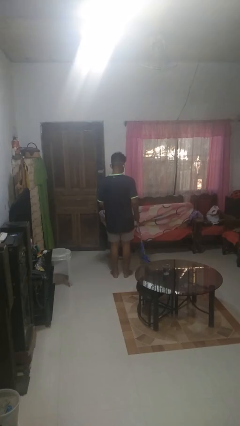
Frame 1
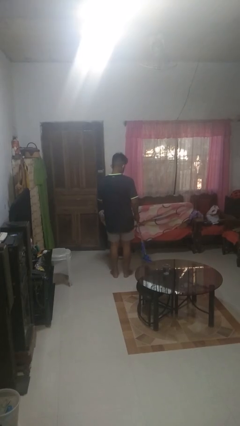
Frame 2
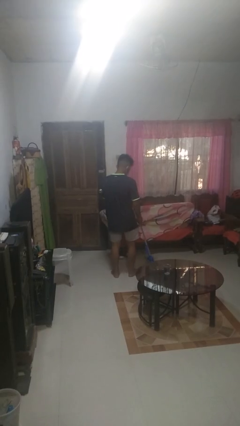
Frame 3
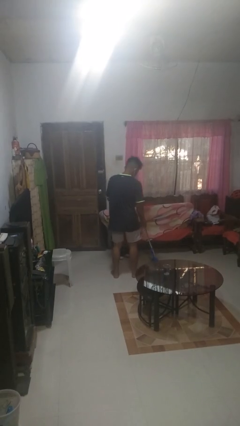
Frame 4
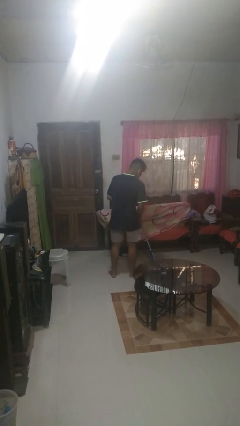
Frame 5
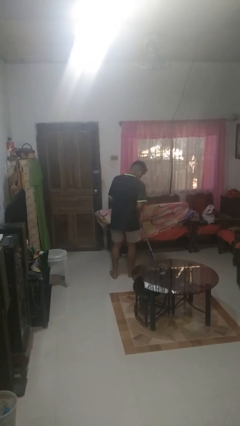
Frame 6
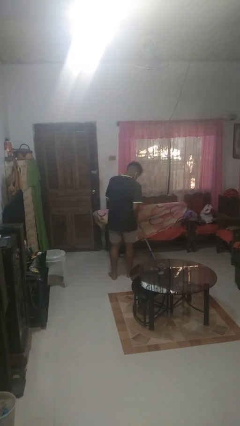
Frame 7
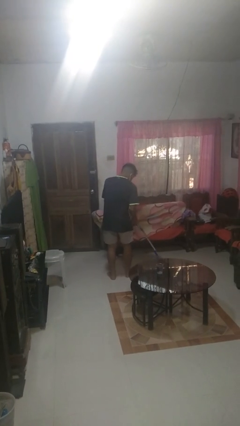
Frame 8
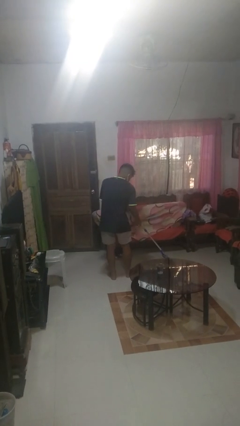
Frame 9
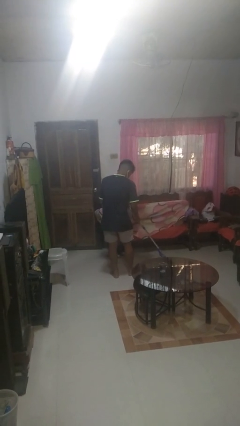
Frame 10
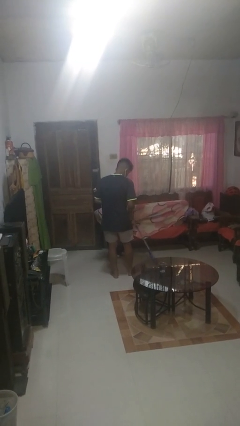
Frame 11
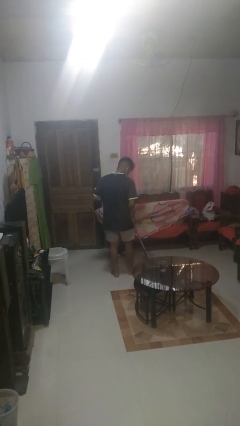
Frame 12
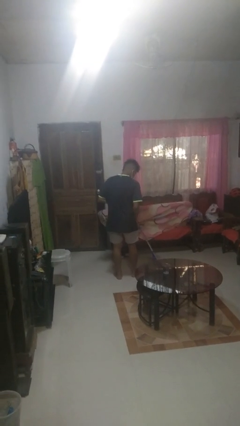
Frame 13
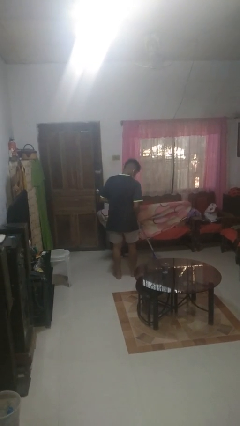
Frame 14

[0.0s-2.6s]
person mops

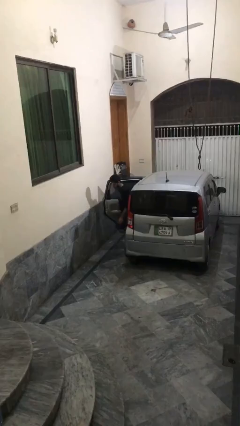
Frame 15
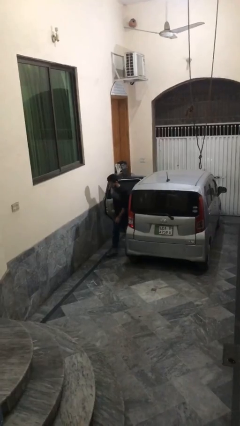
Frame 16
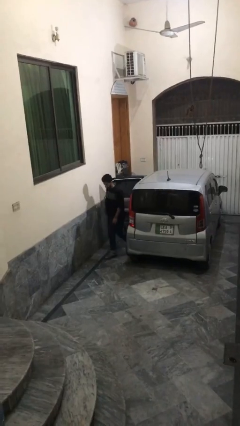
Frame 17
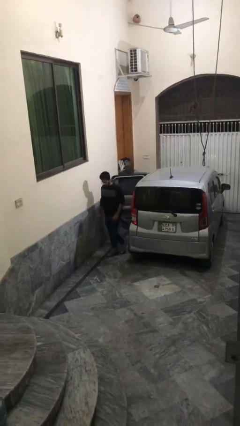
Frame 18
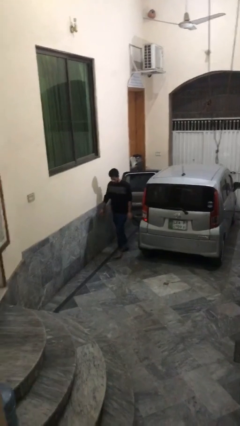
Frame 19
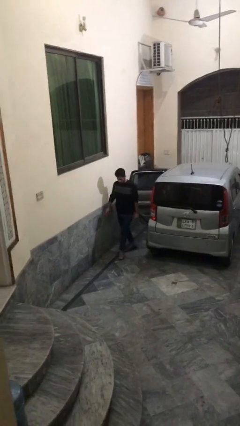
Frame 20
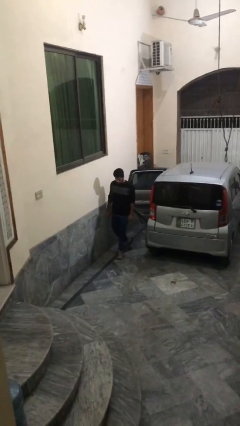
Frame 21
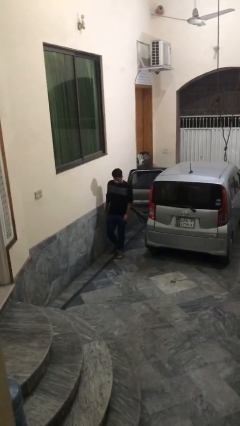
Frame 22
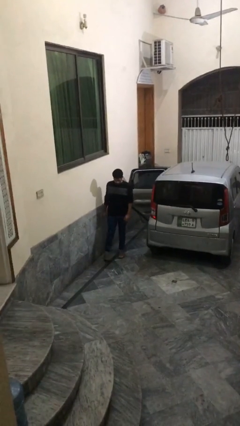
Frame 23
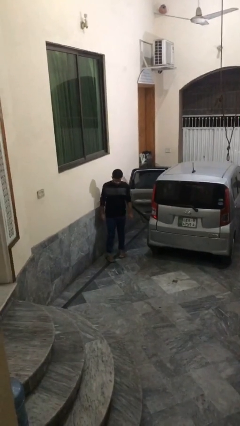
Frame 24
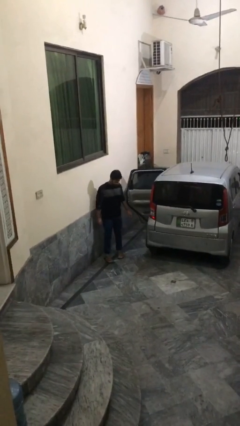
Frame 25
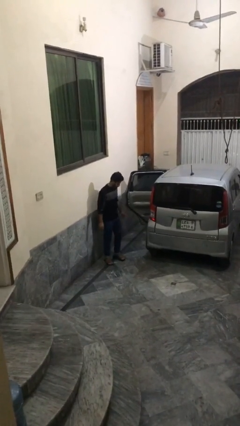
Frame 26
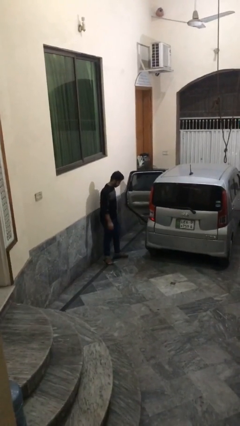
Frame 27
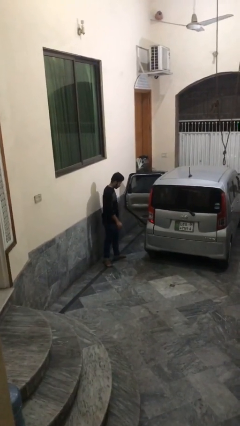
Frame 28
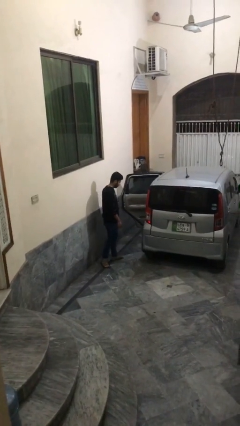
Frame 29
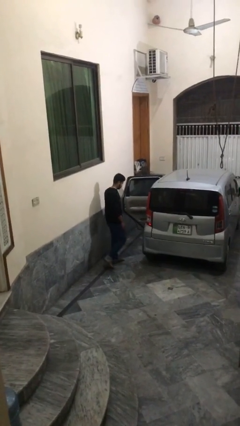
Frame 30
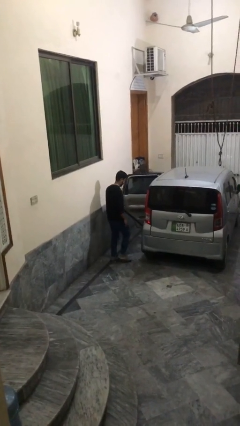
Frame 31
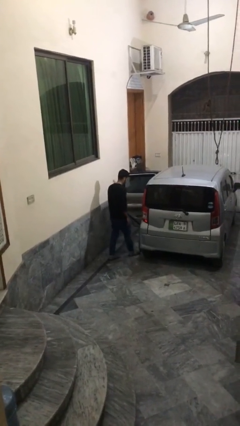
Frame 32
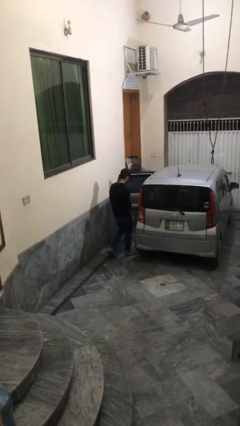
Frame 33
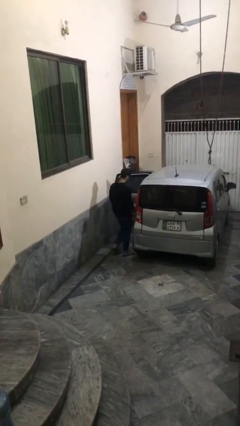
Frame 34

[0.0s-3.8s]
person exits car

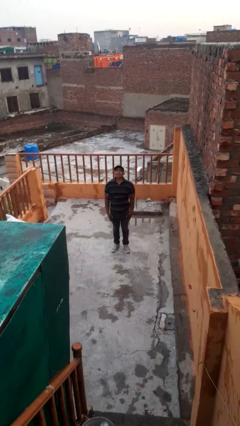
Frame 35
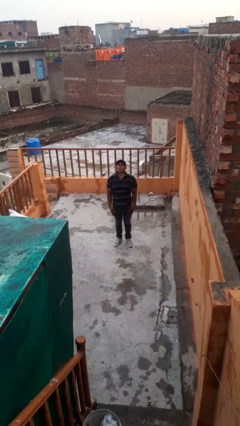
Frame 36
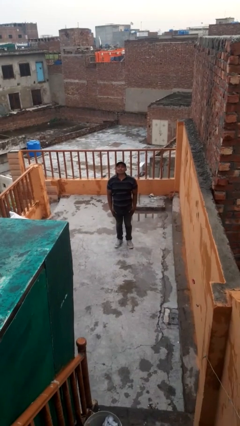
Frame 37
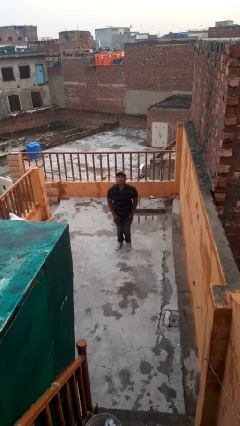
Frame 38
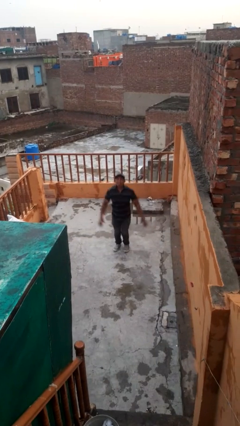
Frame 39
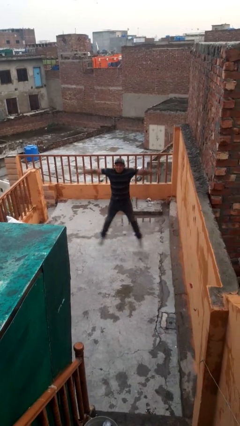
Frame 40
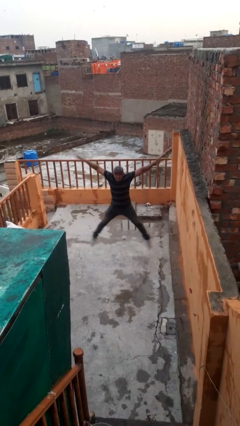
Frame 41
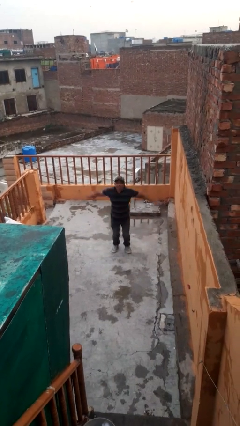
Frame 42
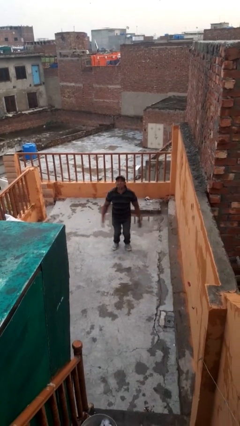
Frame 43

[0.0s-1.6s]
person exercises with jumping jacks

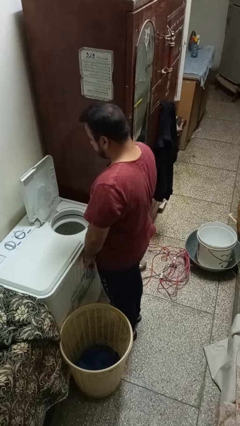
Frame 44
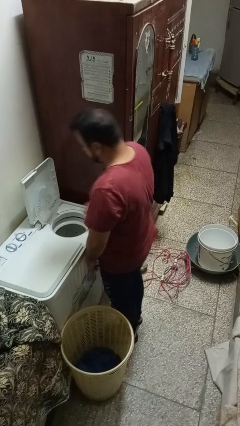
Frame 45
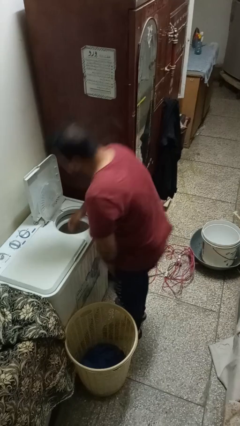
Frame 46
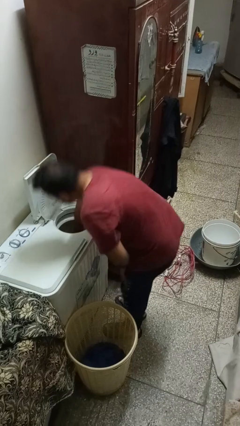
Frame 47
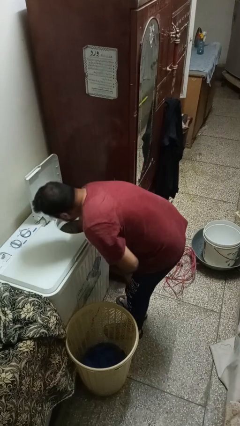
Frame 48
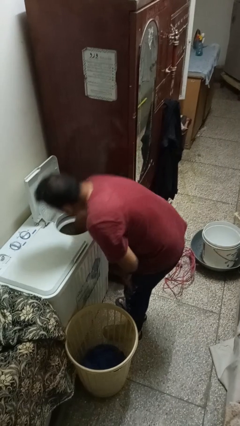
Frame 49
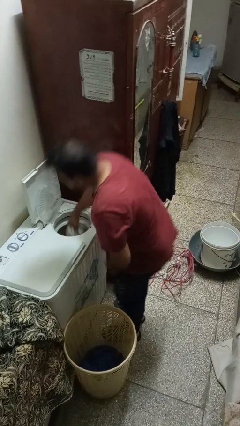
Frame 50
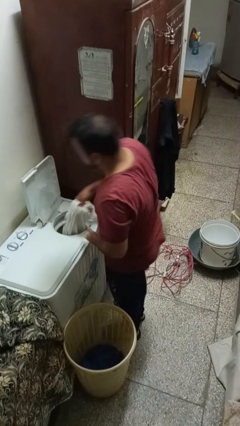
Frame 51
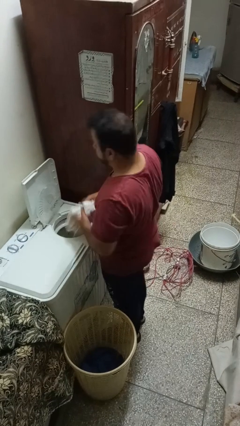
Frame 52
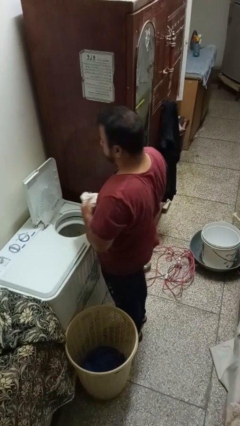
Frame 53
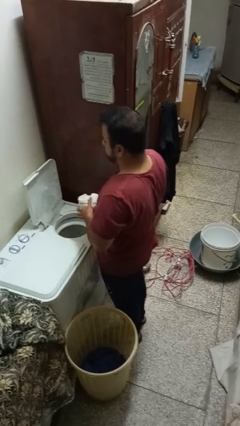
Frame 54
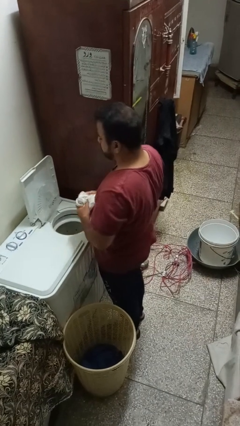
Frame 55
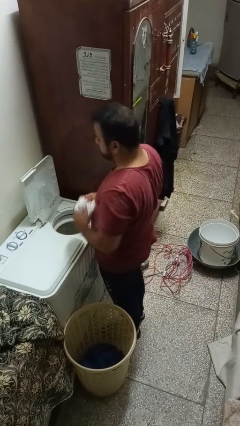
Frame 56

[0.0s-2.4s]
person unloads dryer

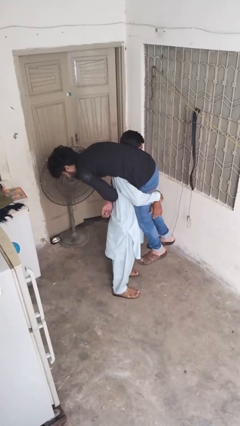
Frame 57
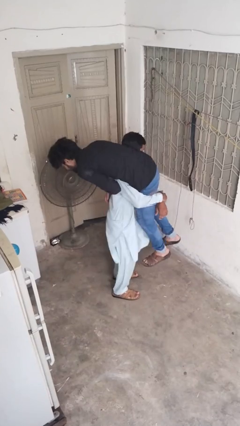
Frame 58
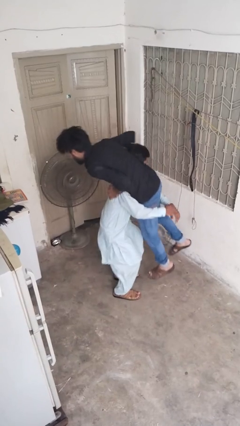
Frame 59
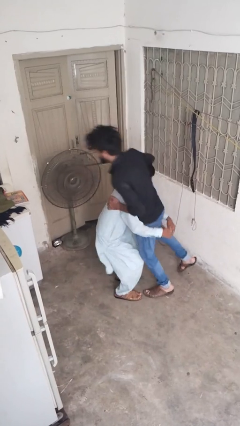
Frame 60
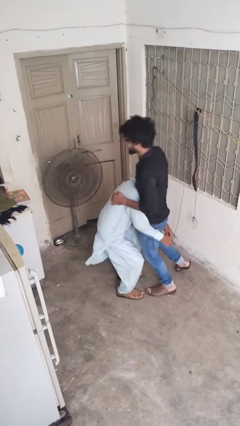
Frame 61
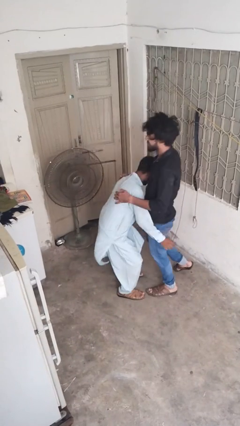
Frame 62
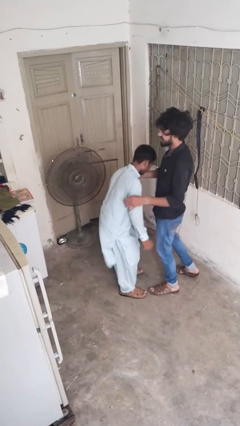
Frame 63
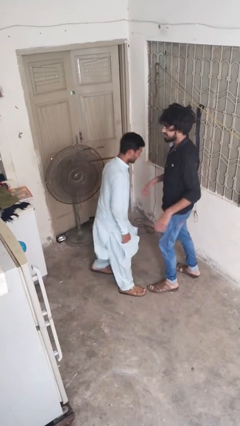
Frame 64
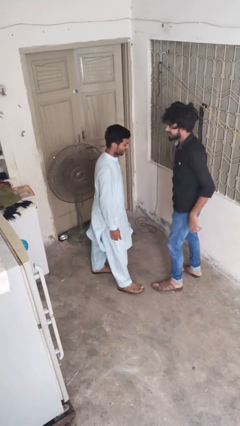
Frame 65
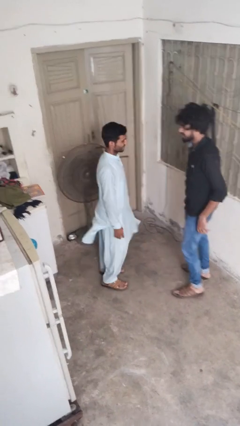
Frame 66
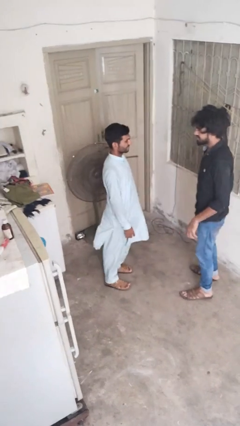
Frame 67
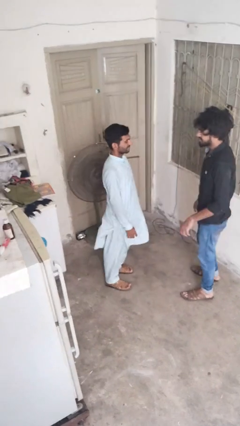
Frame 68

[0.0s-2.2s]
person puts down person

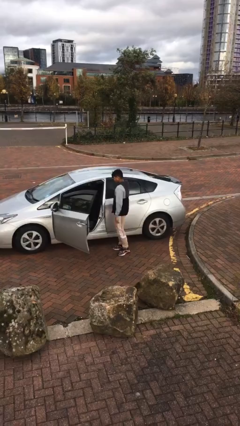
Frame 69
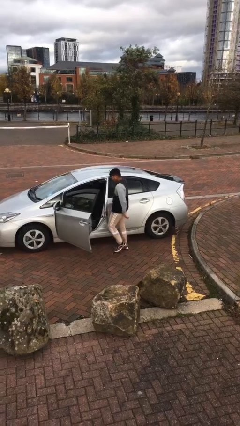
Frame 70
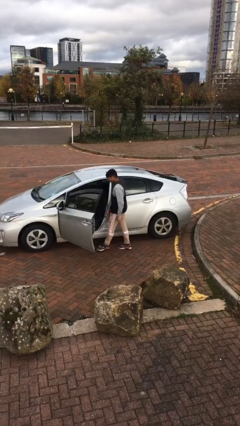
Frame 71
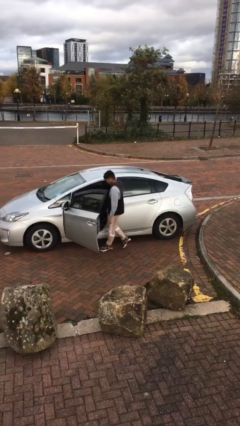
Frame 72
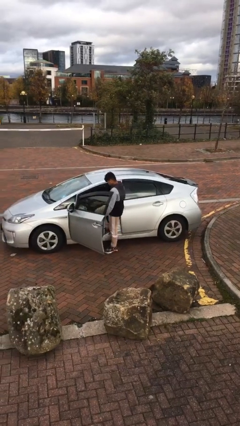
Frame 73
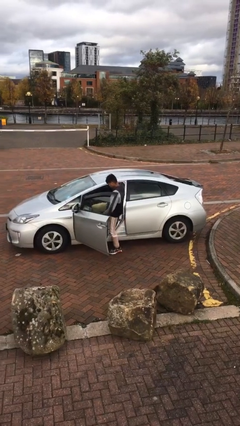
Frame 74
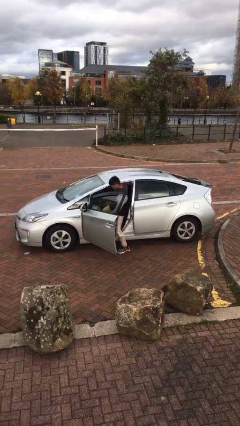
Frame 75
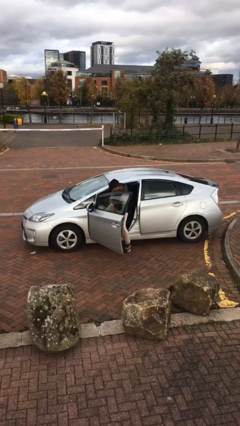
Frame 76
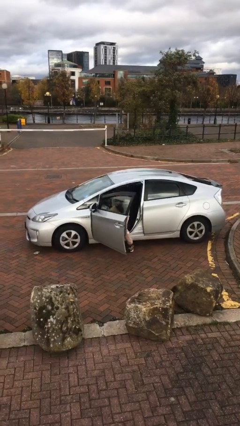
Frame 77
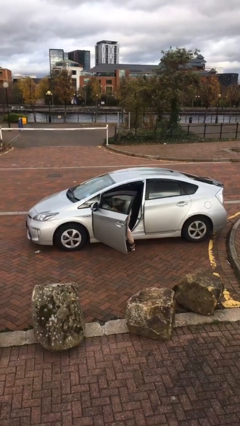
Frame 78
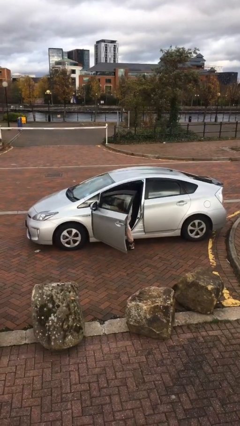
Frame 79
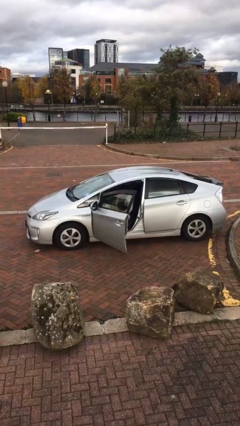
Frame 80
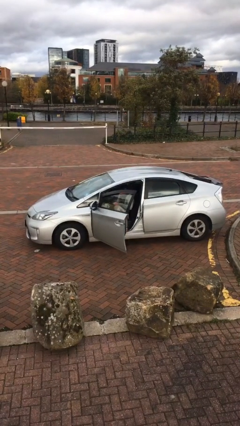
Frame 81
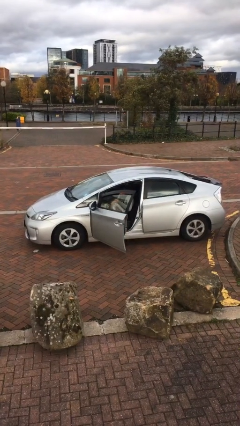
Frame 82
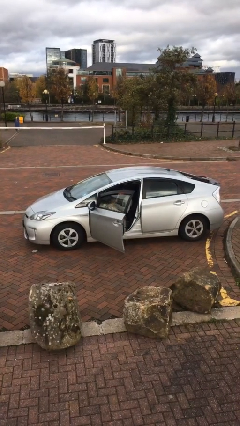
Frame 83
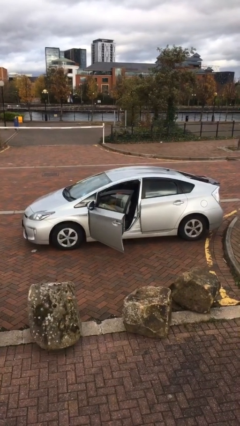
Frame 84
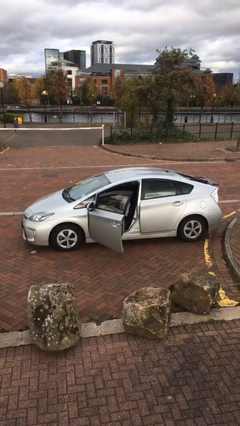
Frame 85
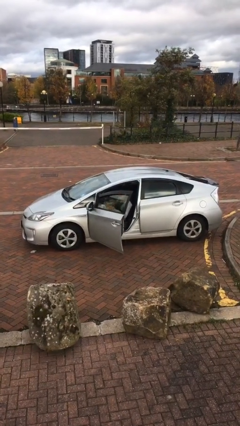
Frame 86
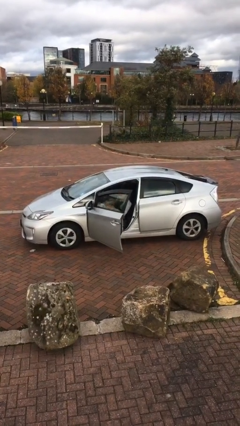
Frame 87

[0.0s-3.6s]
person enters car

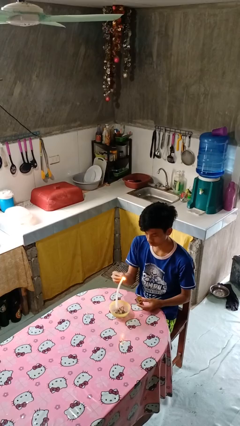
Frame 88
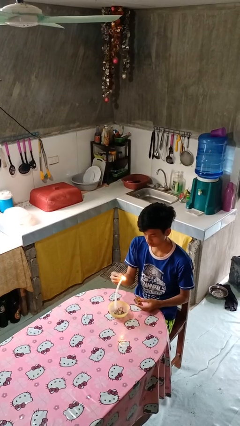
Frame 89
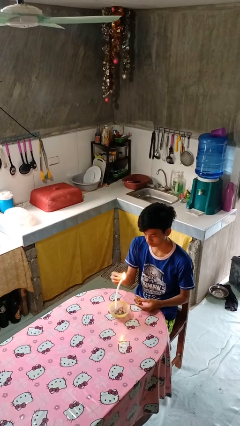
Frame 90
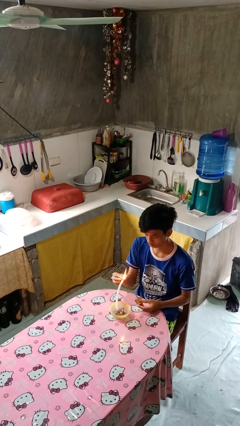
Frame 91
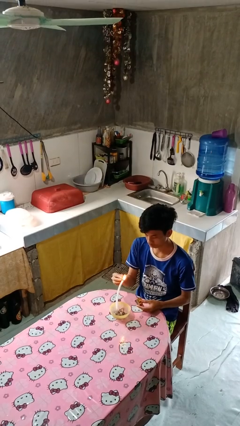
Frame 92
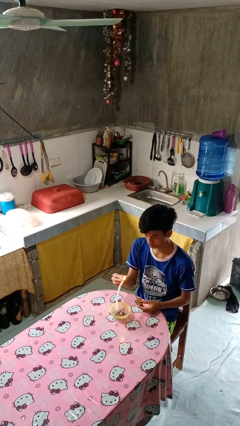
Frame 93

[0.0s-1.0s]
person lights candle
